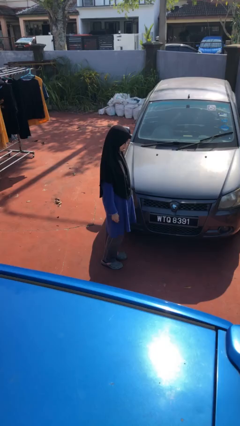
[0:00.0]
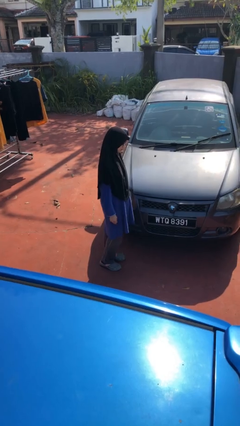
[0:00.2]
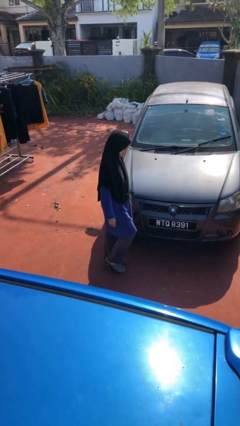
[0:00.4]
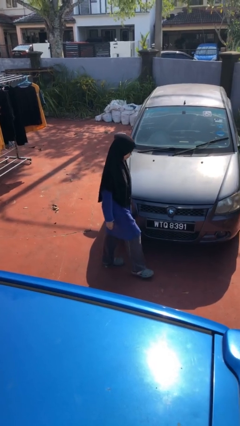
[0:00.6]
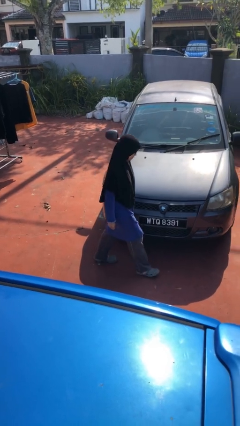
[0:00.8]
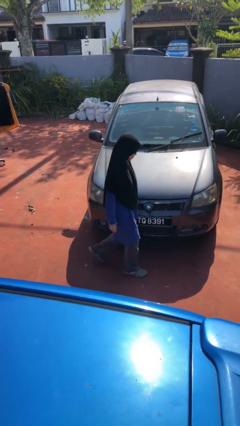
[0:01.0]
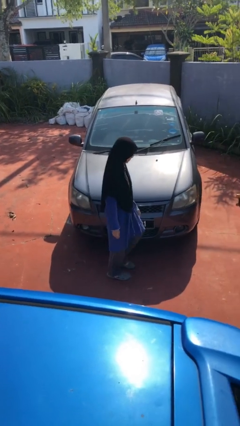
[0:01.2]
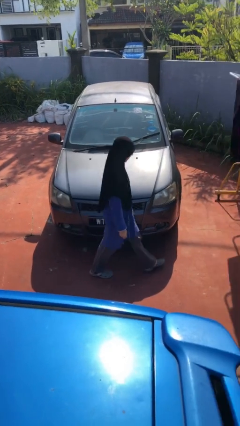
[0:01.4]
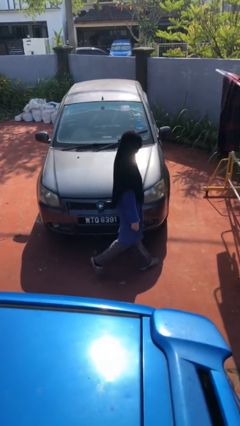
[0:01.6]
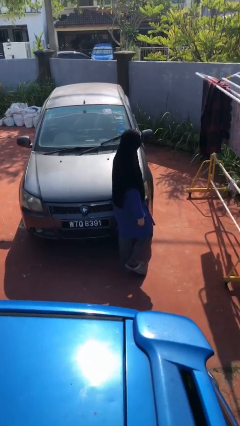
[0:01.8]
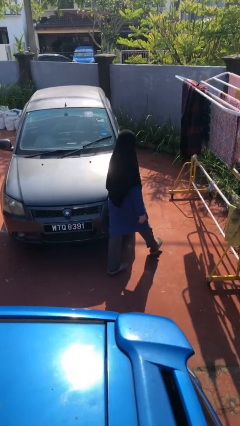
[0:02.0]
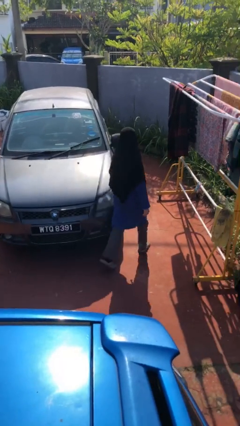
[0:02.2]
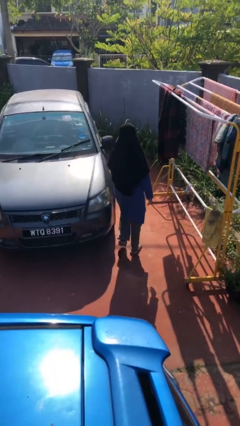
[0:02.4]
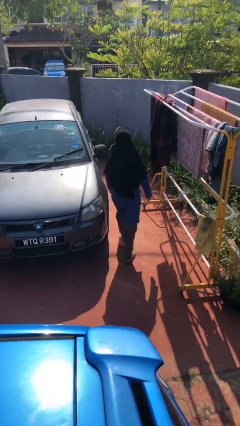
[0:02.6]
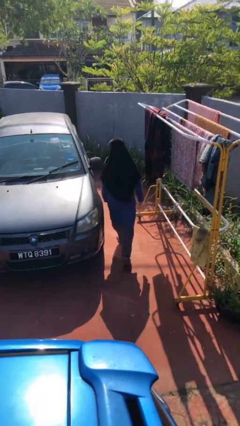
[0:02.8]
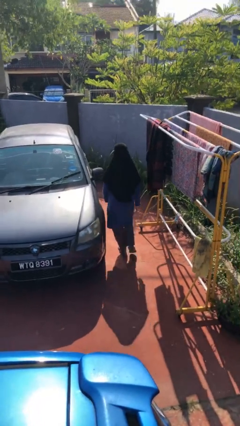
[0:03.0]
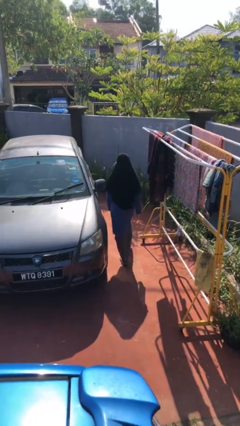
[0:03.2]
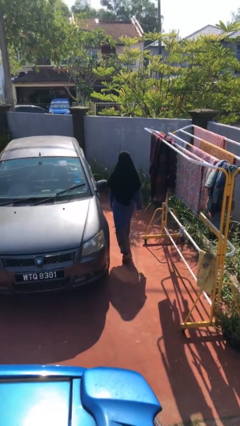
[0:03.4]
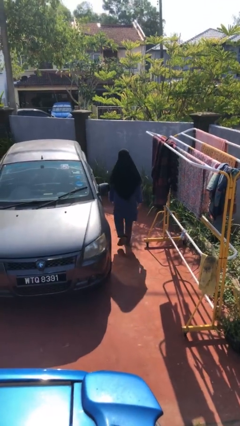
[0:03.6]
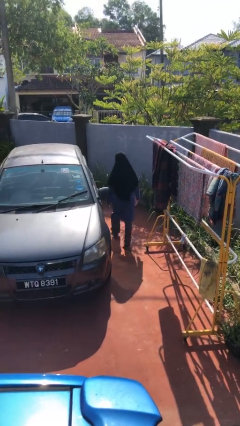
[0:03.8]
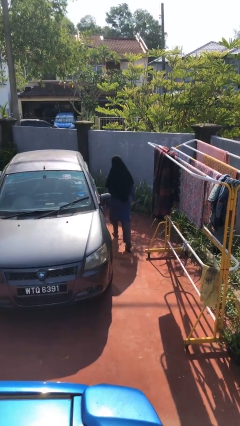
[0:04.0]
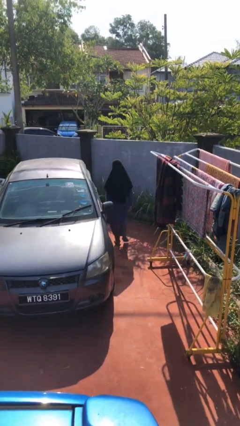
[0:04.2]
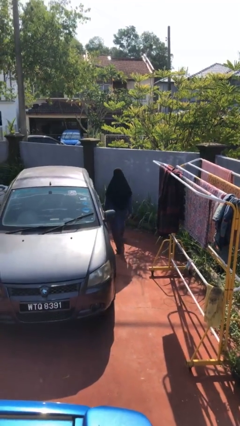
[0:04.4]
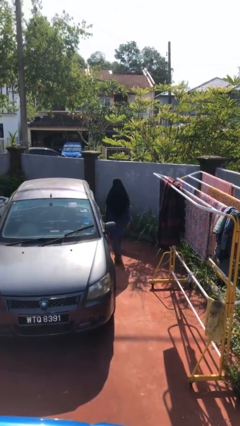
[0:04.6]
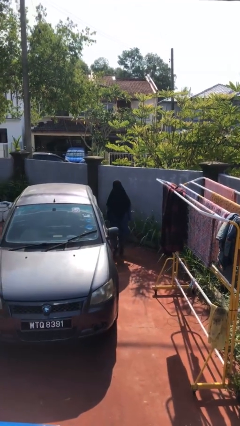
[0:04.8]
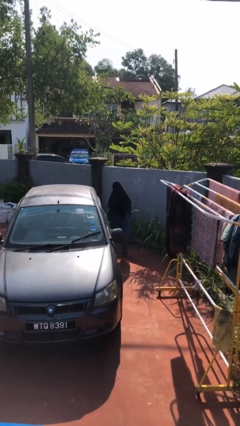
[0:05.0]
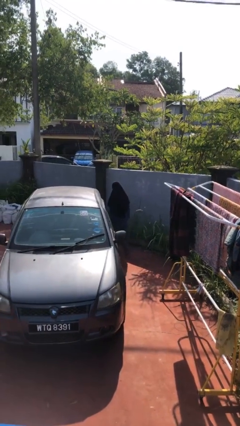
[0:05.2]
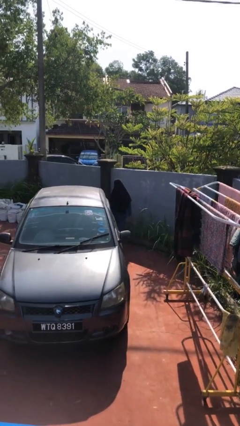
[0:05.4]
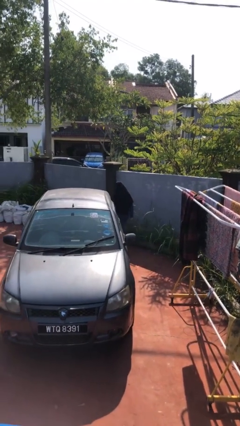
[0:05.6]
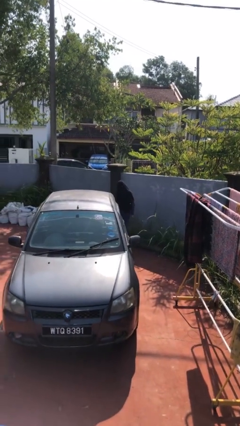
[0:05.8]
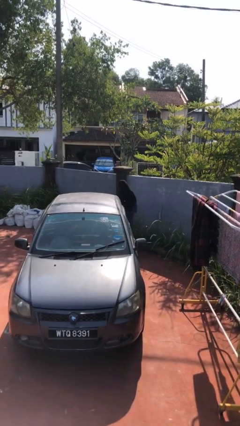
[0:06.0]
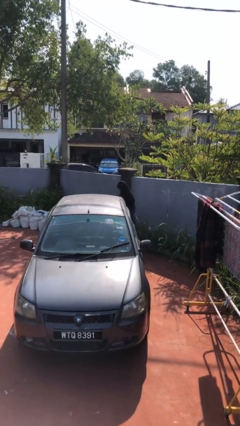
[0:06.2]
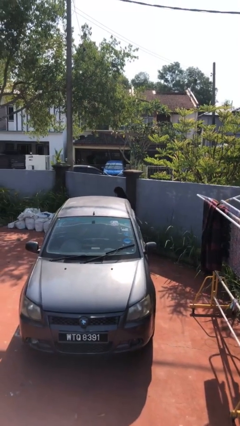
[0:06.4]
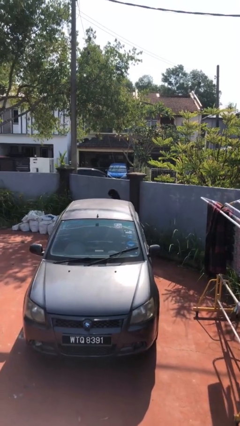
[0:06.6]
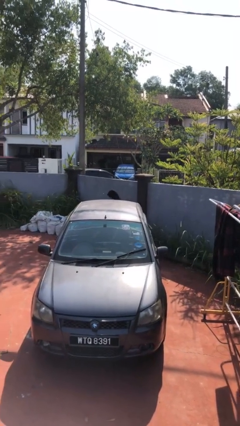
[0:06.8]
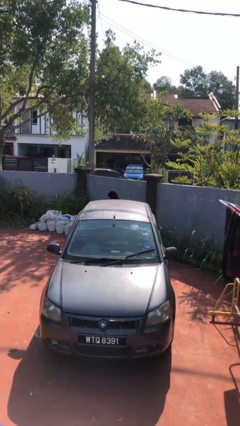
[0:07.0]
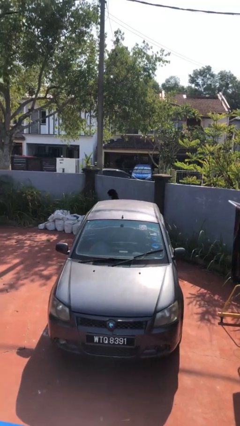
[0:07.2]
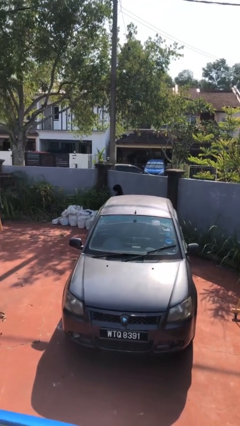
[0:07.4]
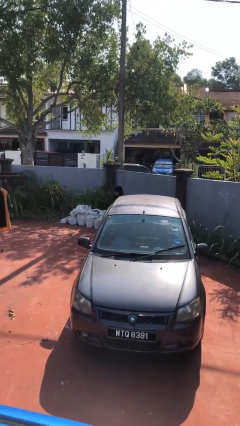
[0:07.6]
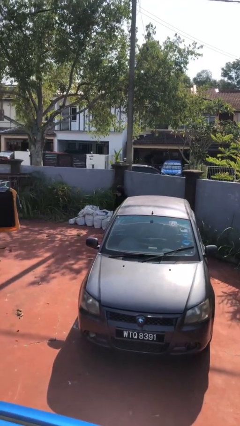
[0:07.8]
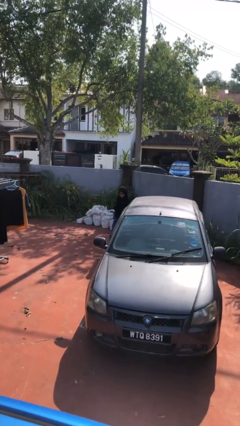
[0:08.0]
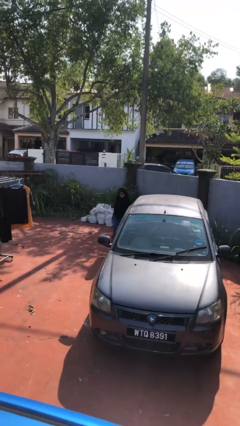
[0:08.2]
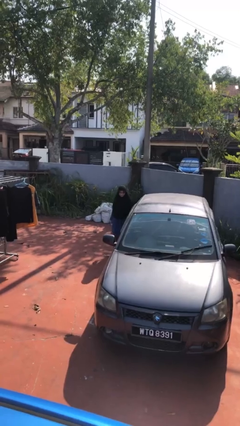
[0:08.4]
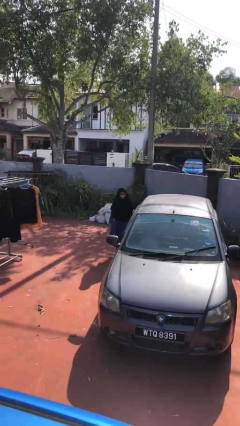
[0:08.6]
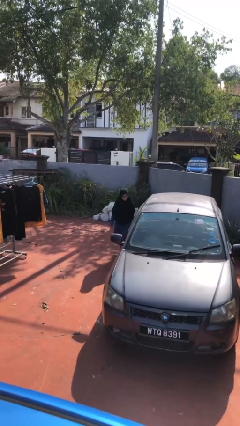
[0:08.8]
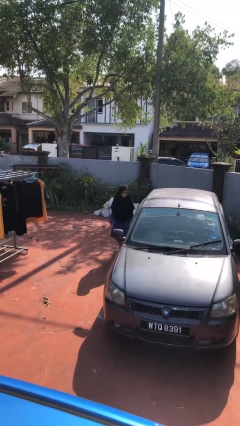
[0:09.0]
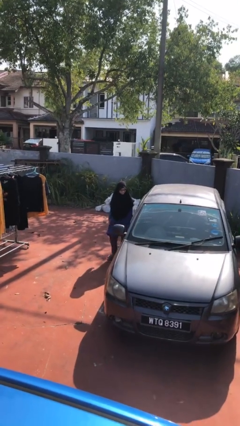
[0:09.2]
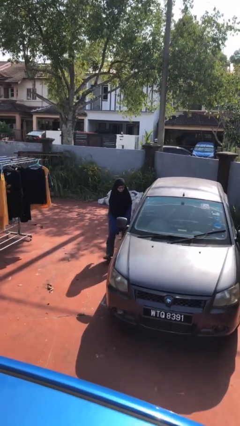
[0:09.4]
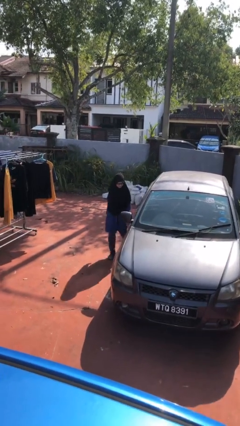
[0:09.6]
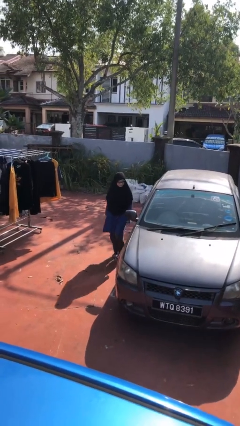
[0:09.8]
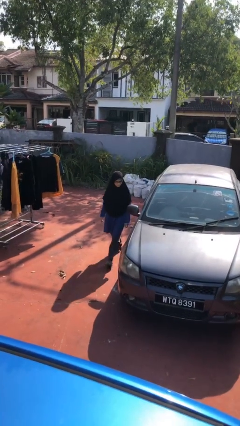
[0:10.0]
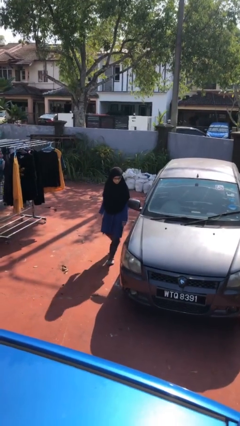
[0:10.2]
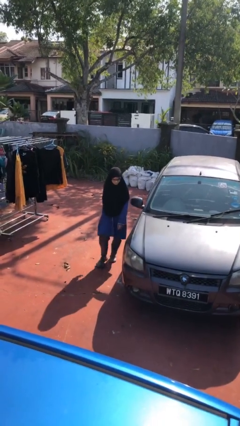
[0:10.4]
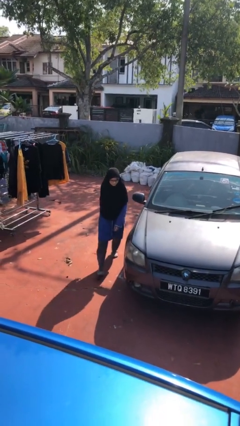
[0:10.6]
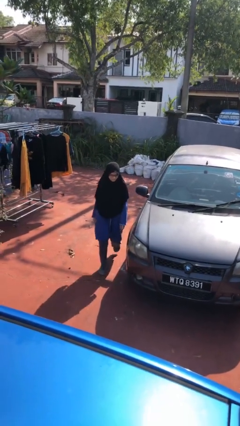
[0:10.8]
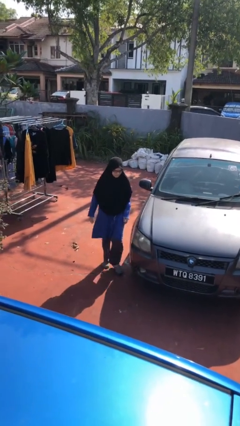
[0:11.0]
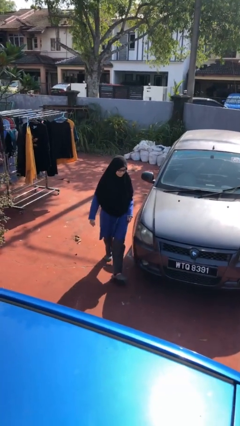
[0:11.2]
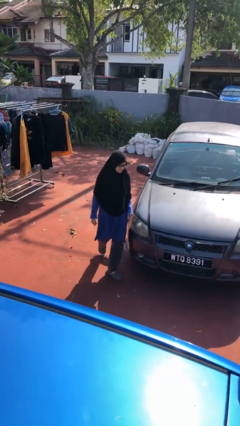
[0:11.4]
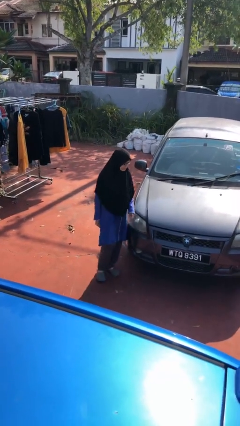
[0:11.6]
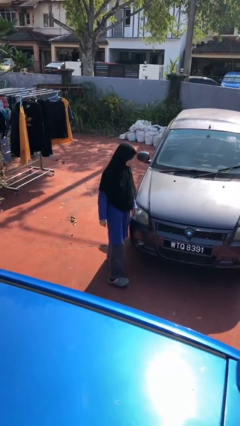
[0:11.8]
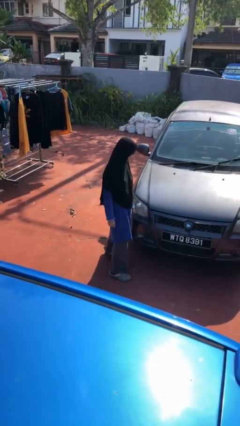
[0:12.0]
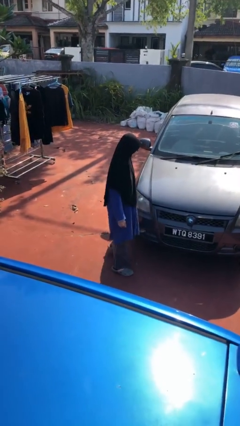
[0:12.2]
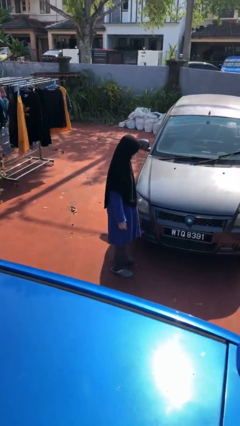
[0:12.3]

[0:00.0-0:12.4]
person walks around car

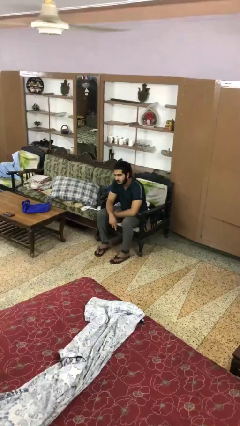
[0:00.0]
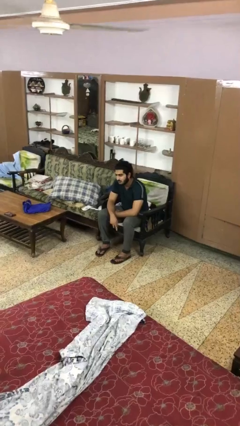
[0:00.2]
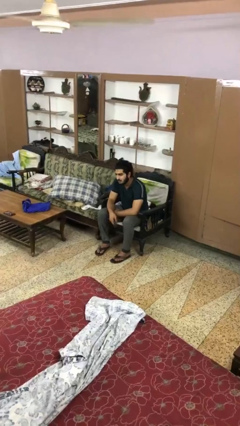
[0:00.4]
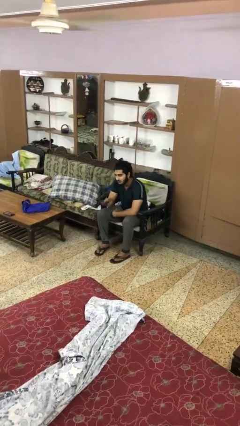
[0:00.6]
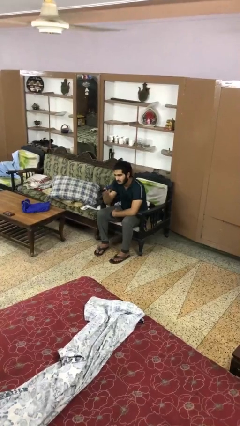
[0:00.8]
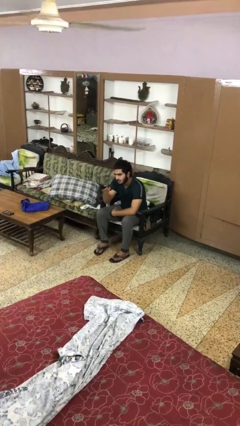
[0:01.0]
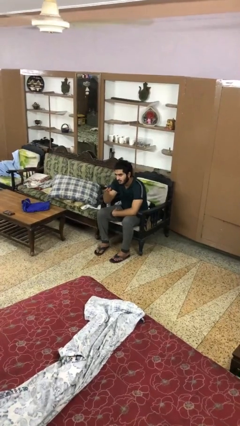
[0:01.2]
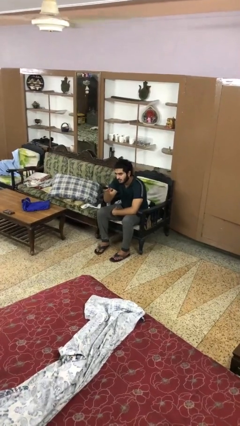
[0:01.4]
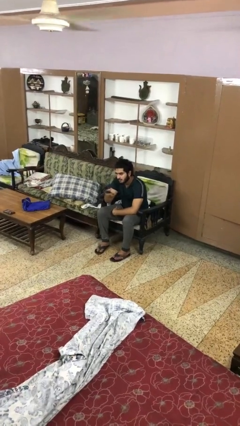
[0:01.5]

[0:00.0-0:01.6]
person uses television remote

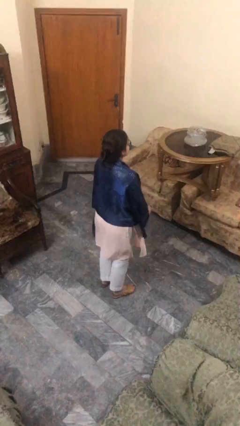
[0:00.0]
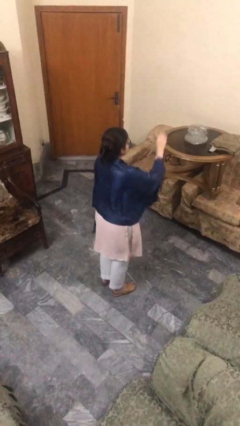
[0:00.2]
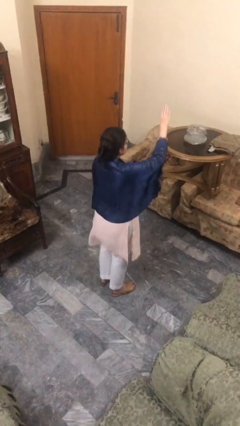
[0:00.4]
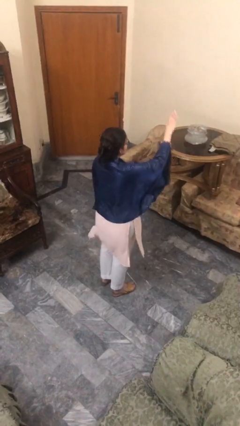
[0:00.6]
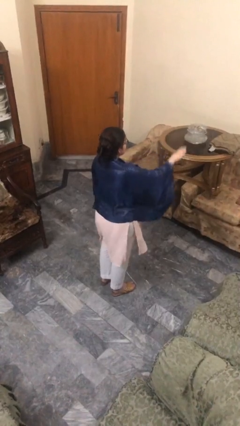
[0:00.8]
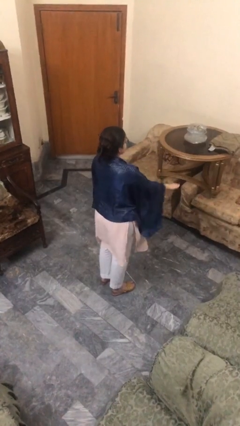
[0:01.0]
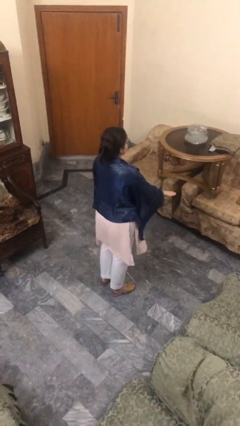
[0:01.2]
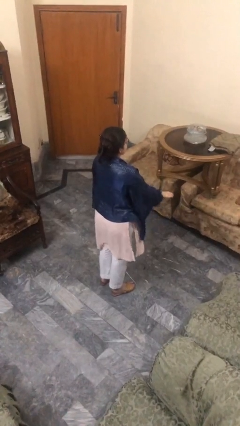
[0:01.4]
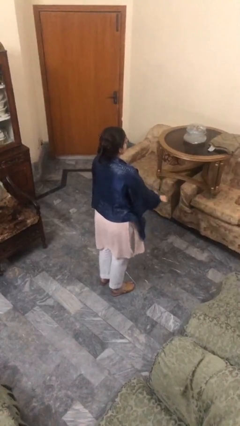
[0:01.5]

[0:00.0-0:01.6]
person gestures swipe down

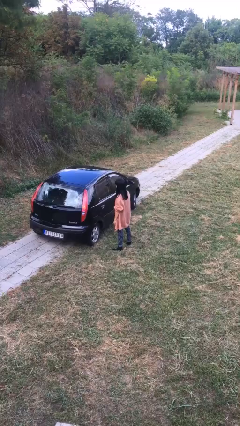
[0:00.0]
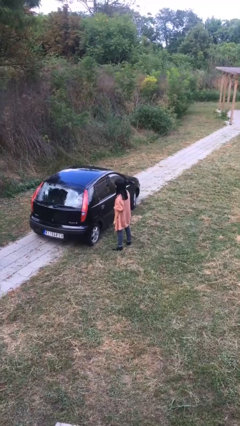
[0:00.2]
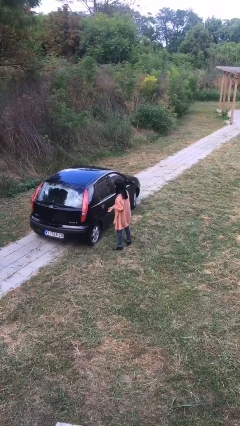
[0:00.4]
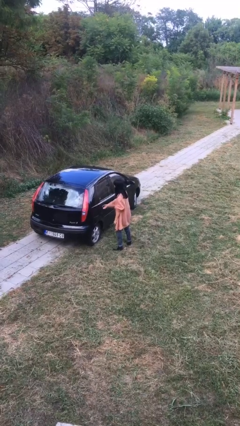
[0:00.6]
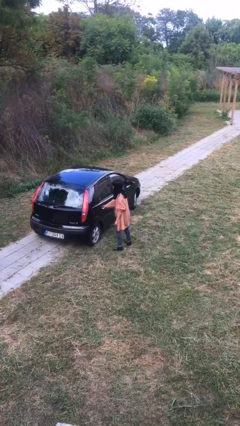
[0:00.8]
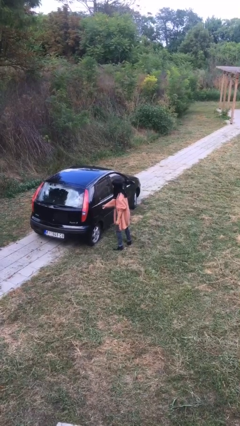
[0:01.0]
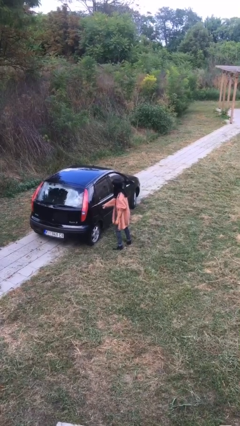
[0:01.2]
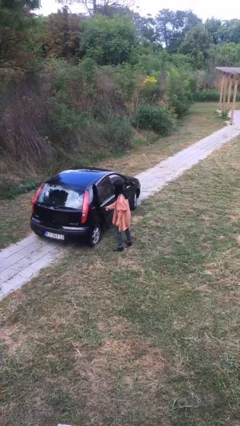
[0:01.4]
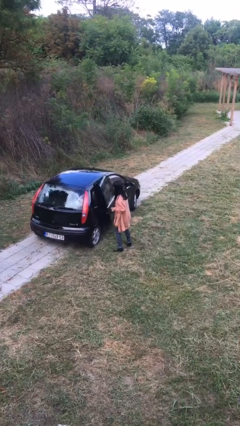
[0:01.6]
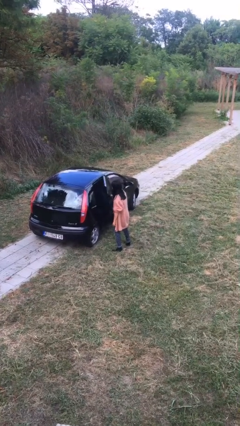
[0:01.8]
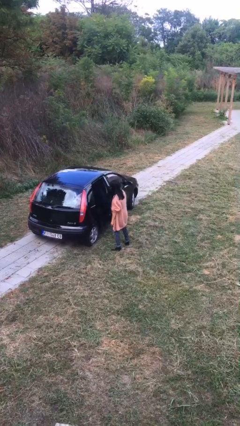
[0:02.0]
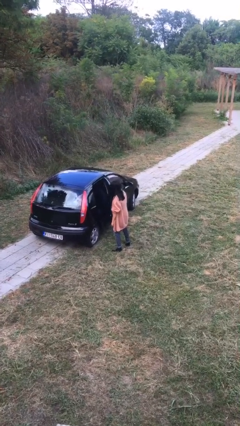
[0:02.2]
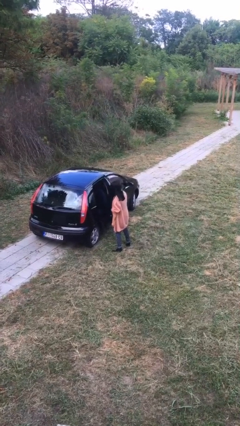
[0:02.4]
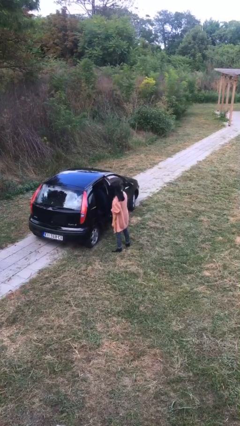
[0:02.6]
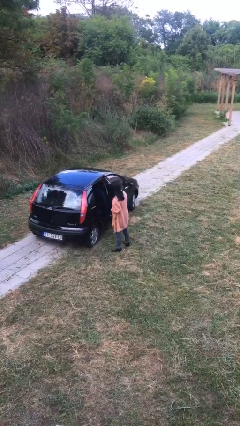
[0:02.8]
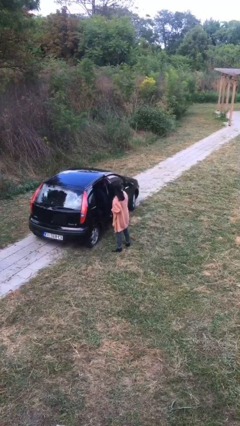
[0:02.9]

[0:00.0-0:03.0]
person opens car door
